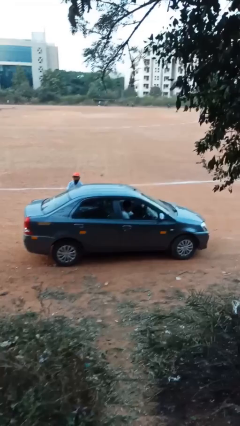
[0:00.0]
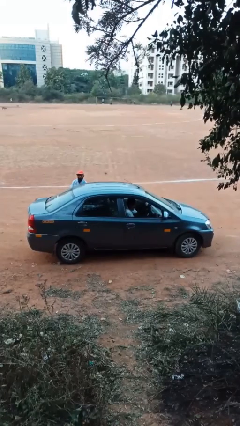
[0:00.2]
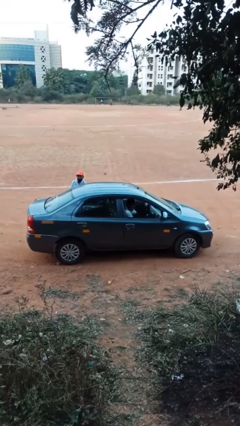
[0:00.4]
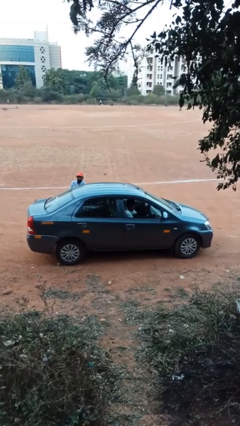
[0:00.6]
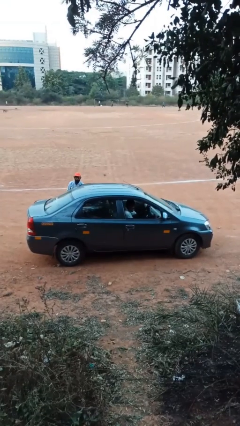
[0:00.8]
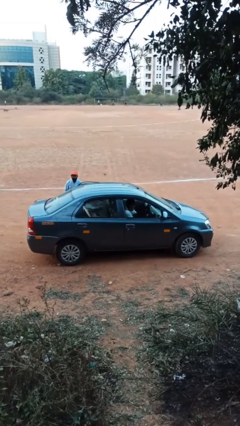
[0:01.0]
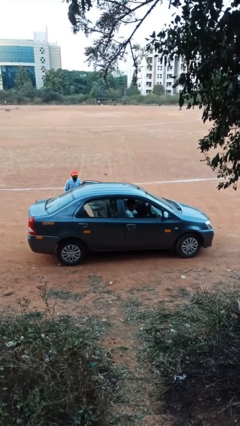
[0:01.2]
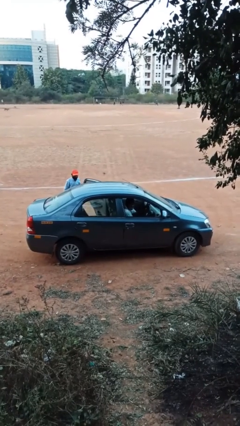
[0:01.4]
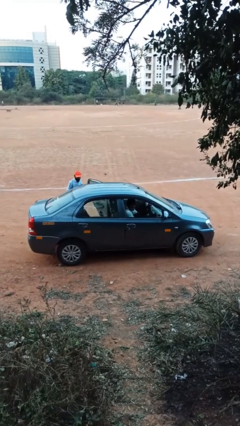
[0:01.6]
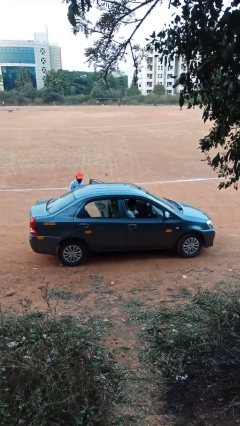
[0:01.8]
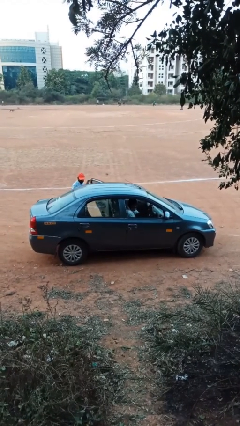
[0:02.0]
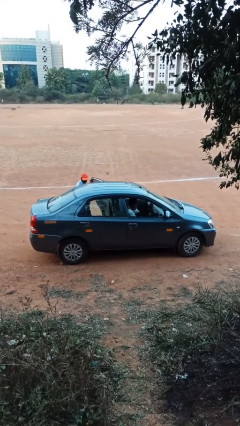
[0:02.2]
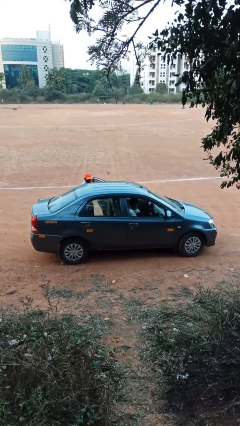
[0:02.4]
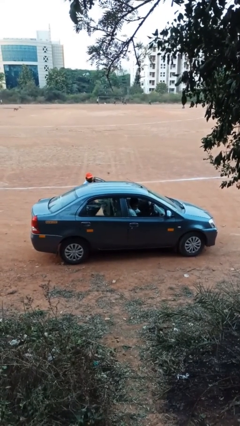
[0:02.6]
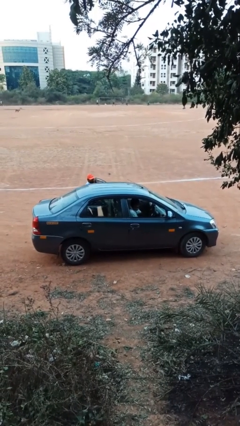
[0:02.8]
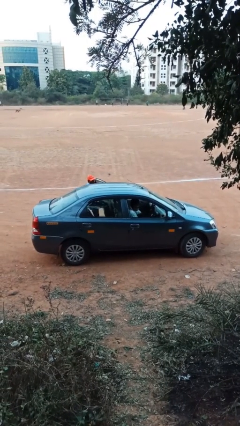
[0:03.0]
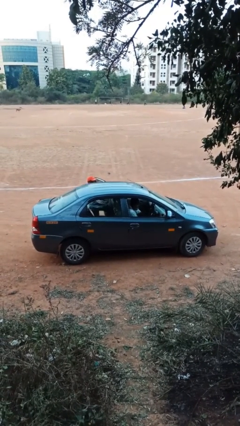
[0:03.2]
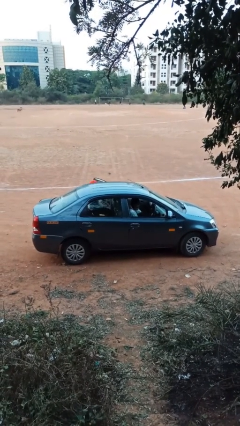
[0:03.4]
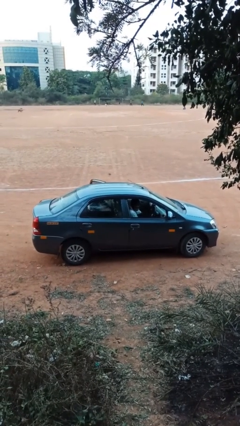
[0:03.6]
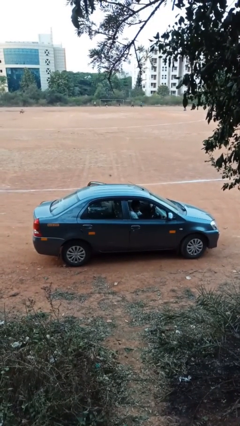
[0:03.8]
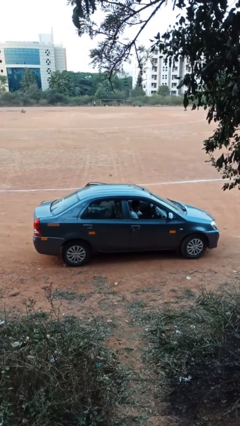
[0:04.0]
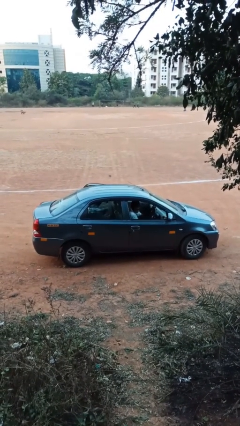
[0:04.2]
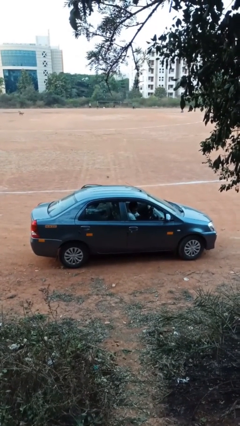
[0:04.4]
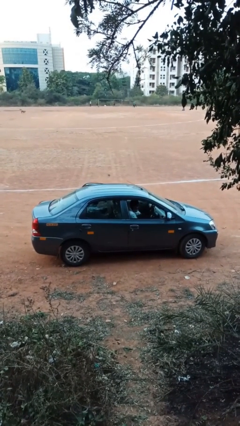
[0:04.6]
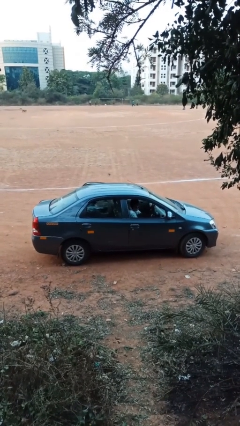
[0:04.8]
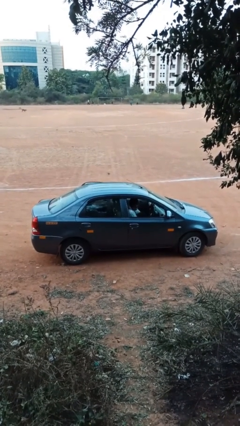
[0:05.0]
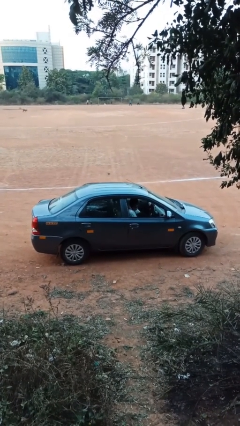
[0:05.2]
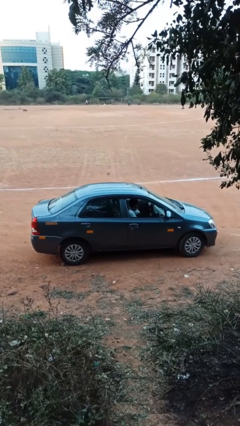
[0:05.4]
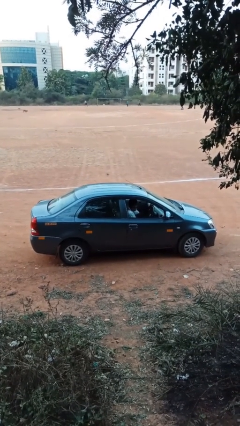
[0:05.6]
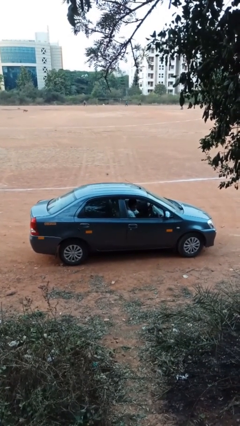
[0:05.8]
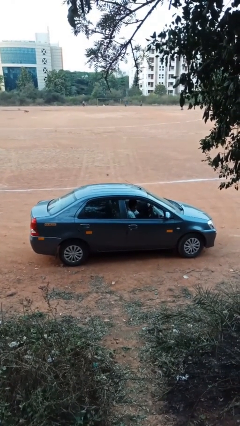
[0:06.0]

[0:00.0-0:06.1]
car picks up person

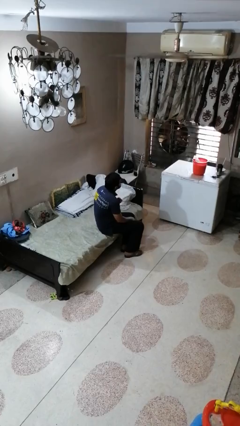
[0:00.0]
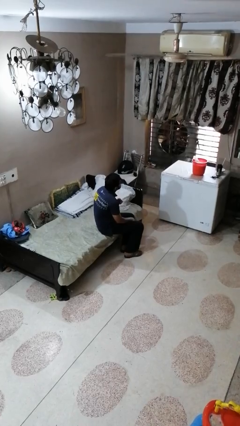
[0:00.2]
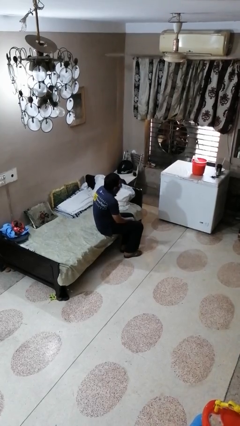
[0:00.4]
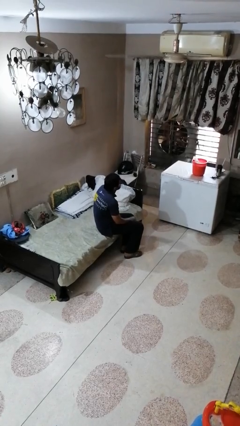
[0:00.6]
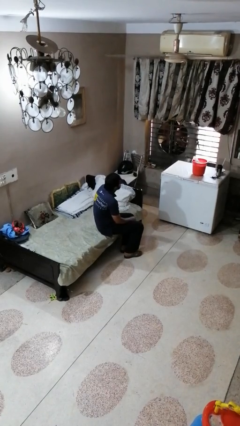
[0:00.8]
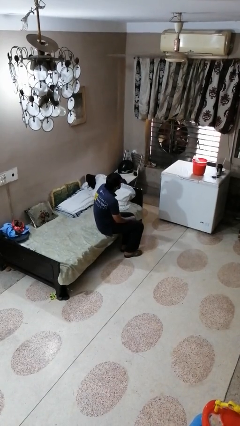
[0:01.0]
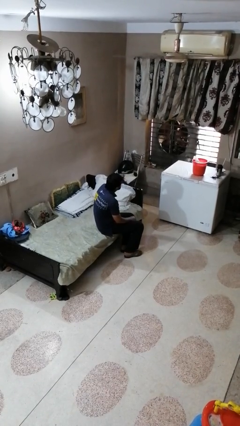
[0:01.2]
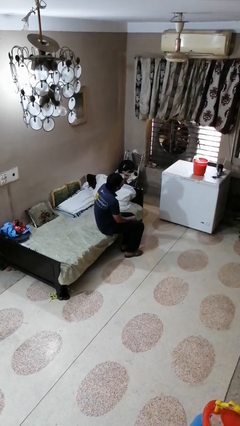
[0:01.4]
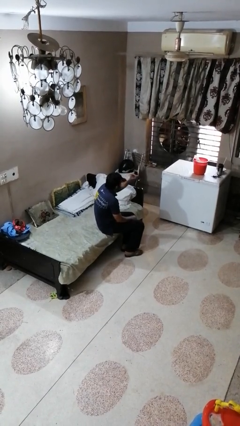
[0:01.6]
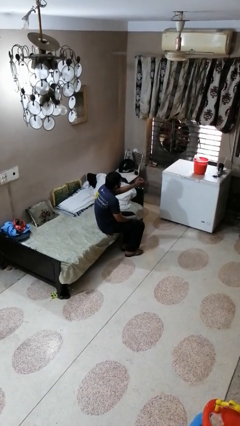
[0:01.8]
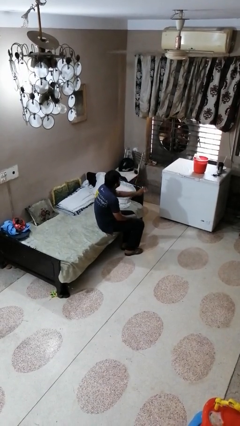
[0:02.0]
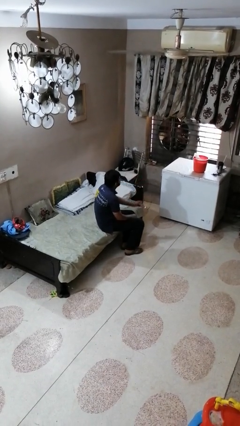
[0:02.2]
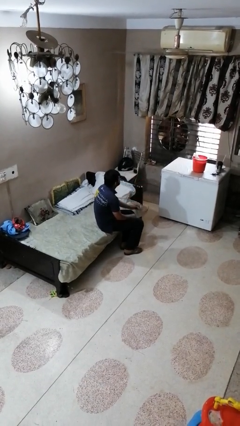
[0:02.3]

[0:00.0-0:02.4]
person takes off glasses

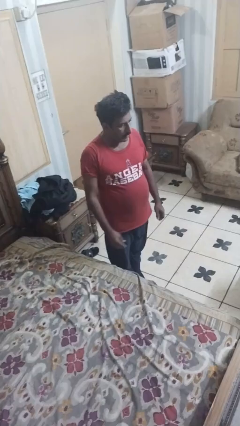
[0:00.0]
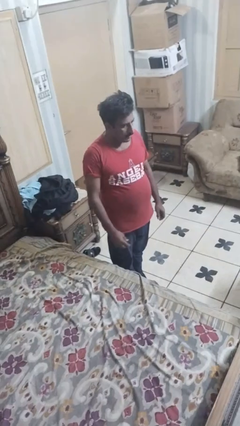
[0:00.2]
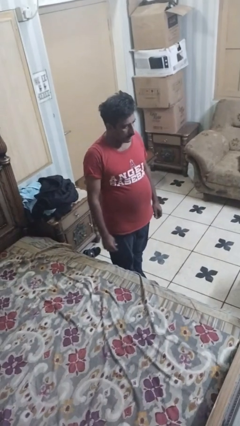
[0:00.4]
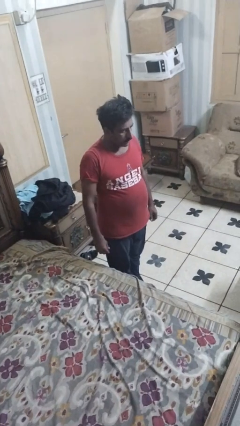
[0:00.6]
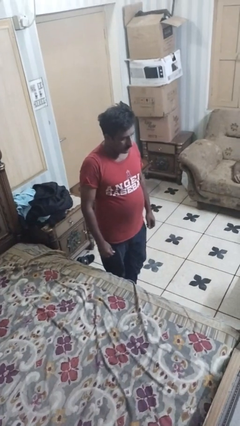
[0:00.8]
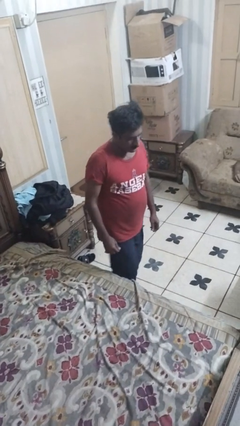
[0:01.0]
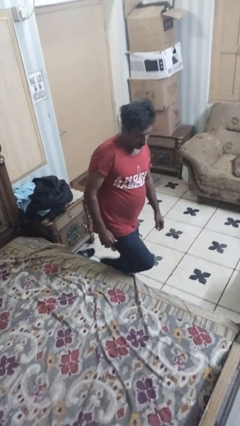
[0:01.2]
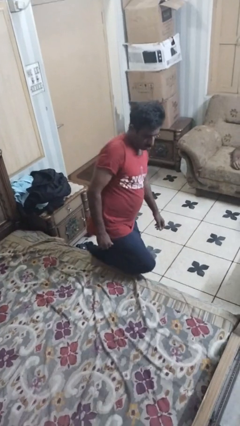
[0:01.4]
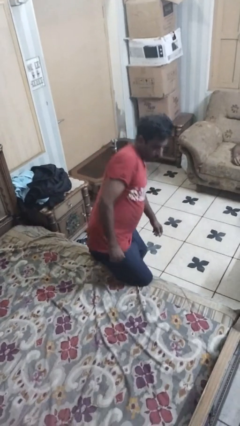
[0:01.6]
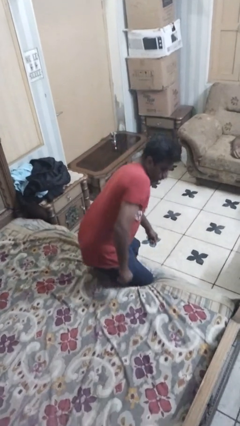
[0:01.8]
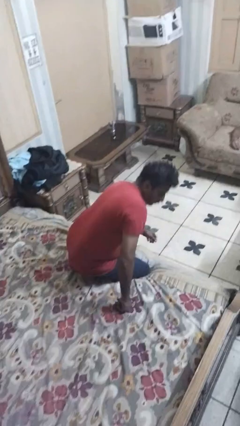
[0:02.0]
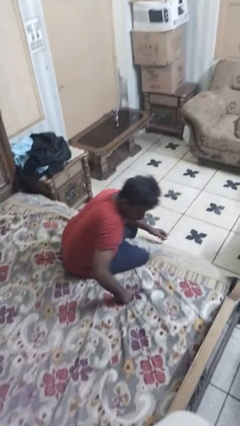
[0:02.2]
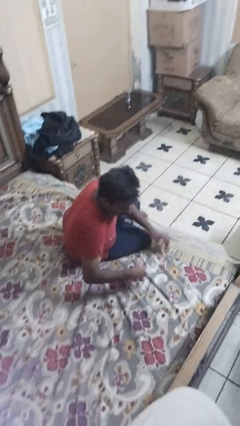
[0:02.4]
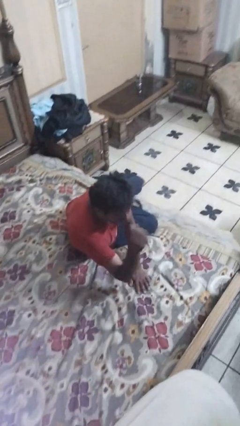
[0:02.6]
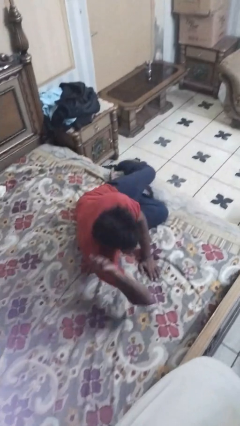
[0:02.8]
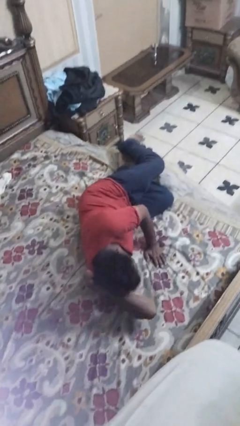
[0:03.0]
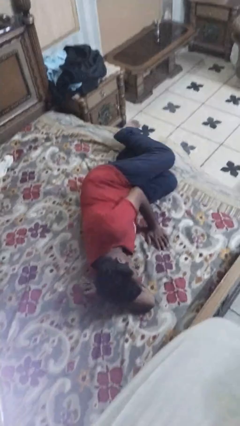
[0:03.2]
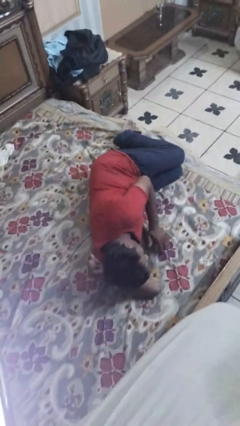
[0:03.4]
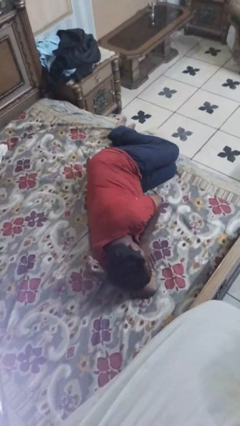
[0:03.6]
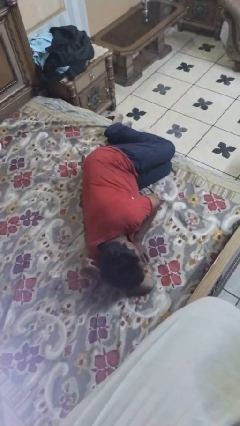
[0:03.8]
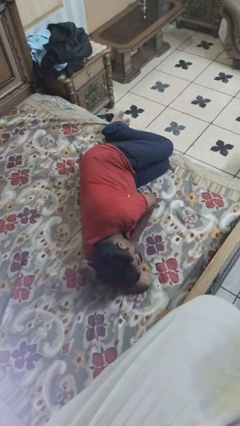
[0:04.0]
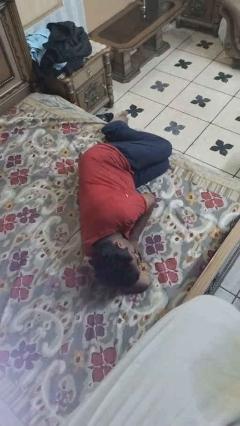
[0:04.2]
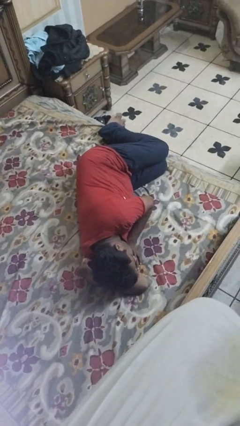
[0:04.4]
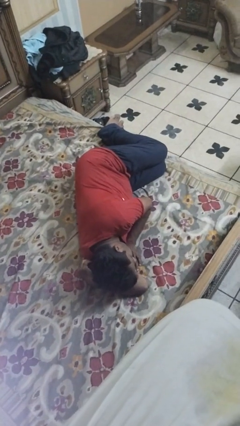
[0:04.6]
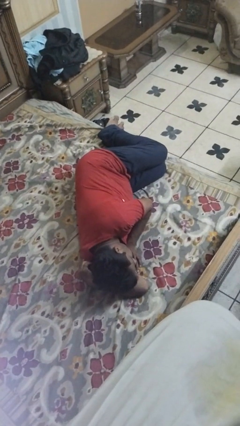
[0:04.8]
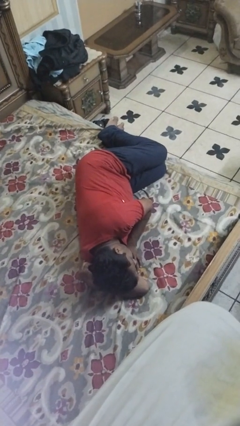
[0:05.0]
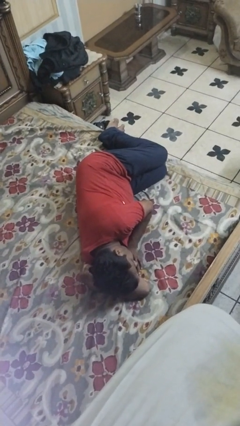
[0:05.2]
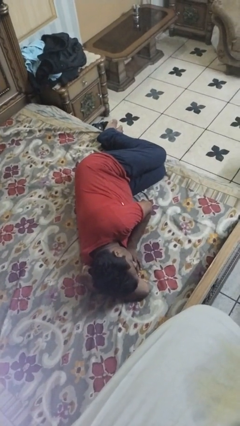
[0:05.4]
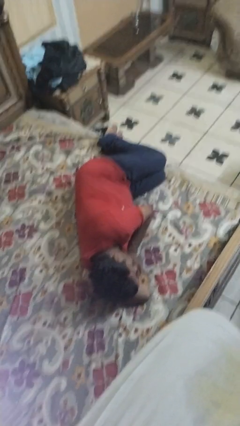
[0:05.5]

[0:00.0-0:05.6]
person lies down on bed

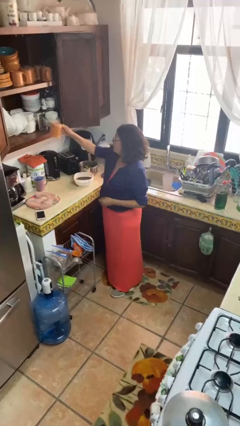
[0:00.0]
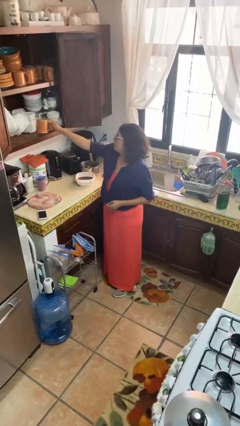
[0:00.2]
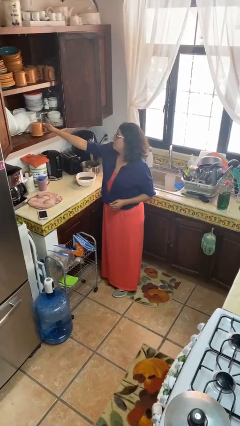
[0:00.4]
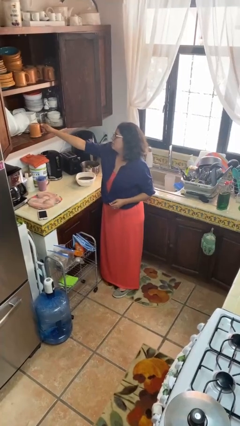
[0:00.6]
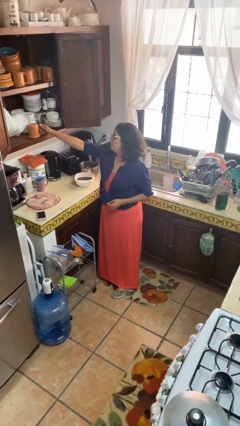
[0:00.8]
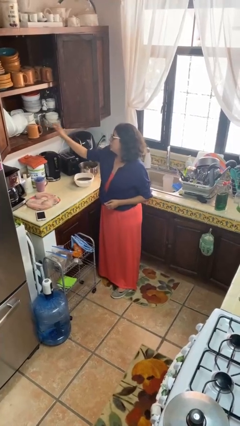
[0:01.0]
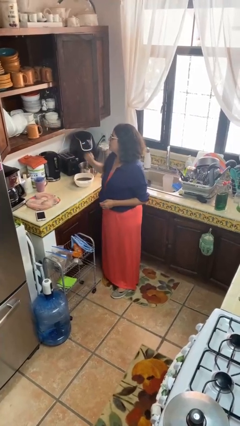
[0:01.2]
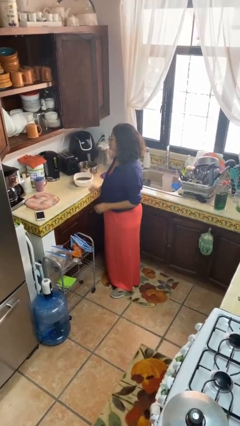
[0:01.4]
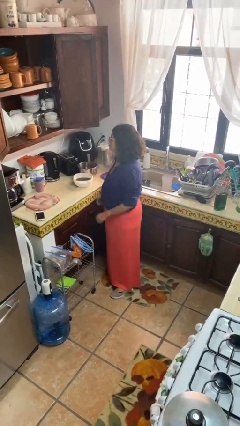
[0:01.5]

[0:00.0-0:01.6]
person puts down object into cabinet

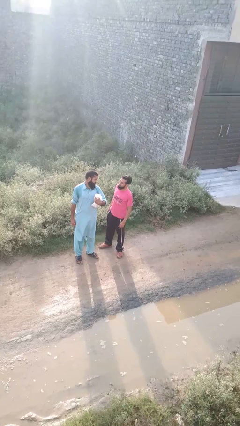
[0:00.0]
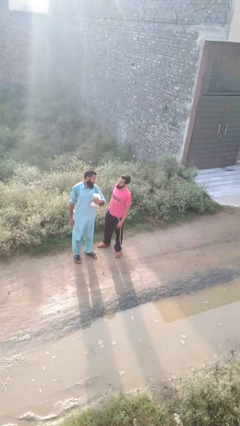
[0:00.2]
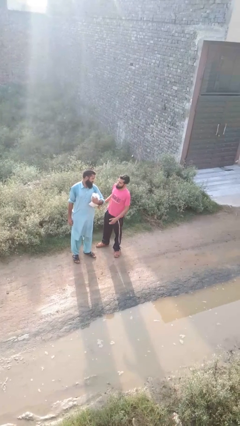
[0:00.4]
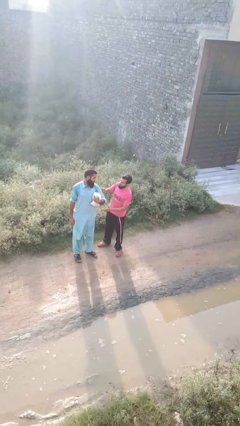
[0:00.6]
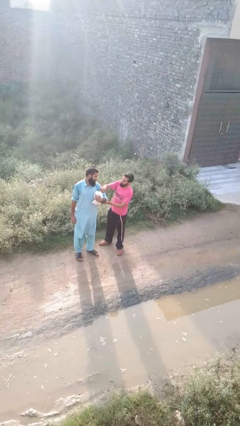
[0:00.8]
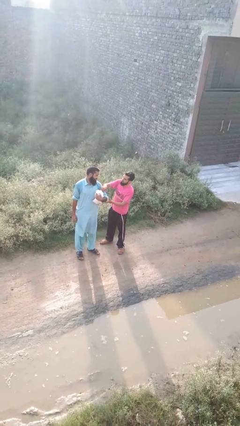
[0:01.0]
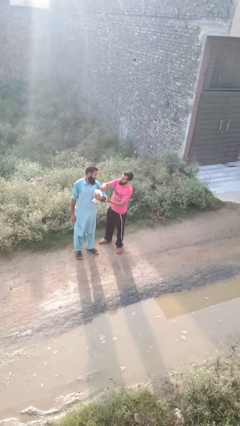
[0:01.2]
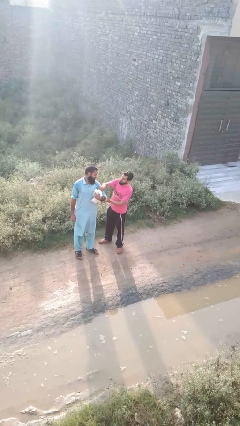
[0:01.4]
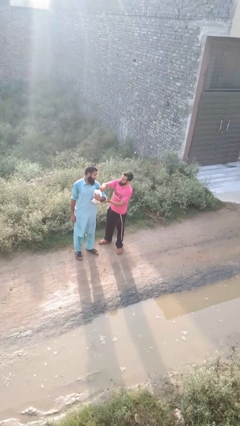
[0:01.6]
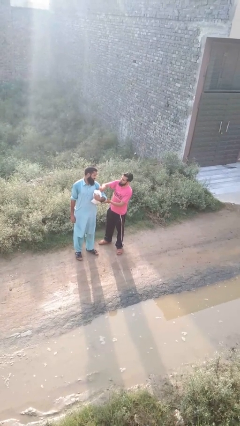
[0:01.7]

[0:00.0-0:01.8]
person grabs person by bicep
